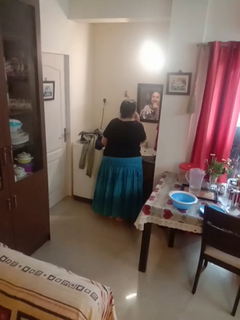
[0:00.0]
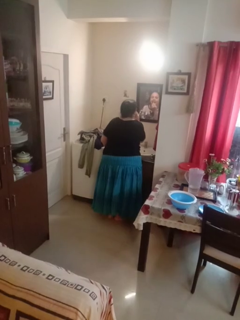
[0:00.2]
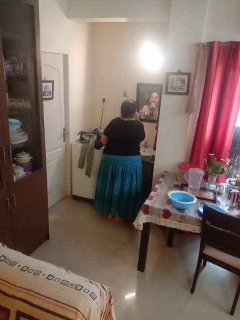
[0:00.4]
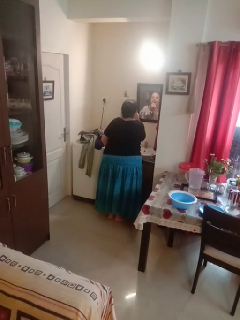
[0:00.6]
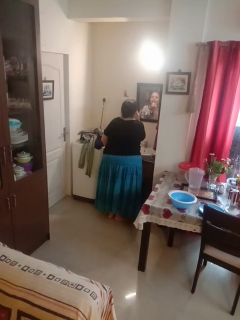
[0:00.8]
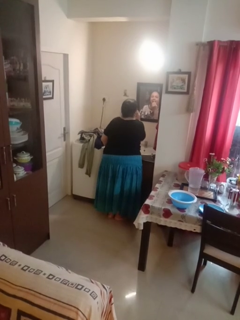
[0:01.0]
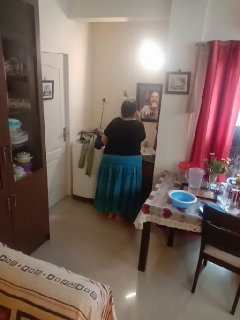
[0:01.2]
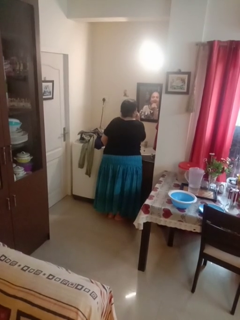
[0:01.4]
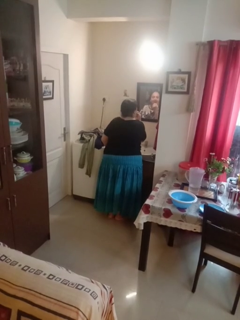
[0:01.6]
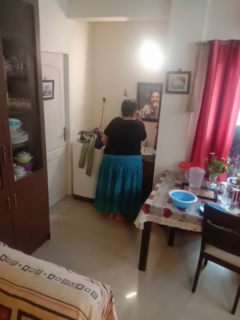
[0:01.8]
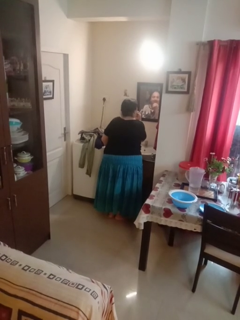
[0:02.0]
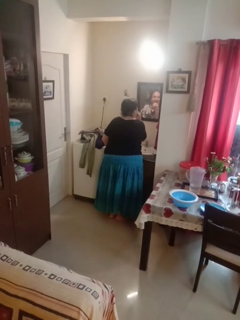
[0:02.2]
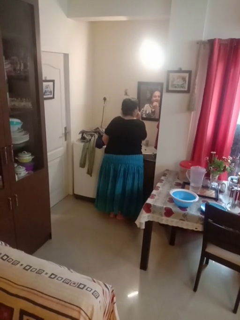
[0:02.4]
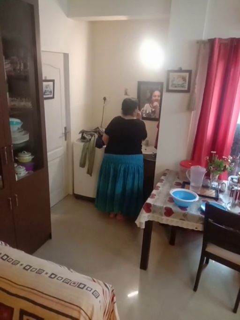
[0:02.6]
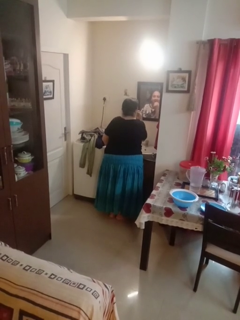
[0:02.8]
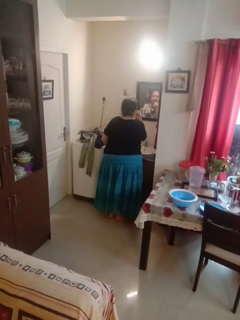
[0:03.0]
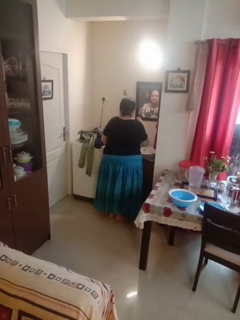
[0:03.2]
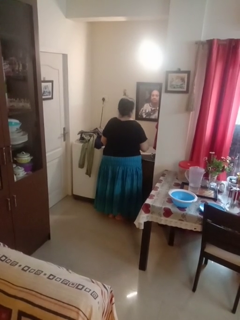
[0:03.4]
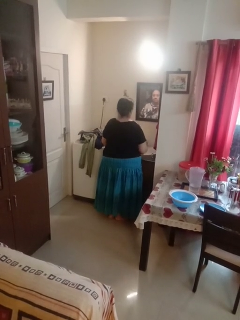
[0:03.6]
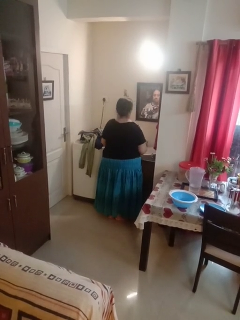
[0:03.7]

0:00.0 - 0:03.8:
person applies lip makeup

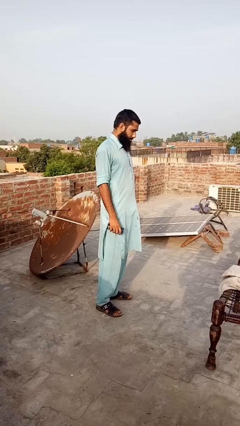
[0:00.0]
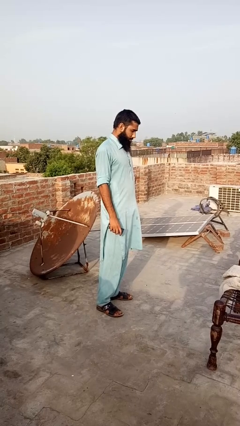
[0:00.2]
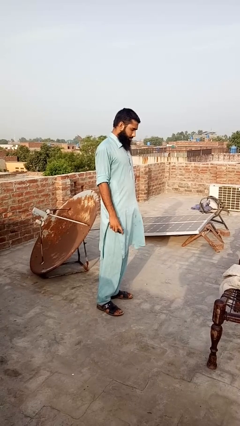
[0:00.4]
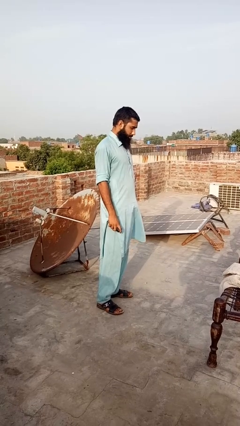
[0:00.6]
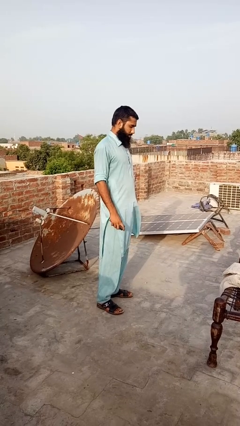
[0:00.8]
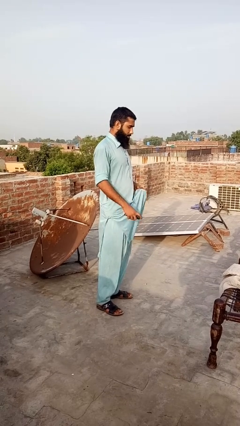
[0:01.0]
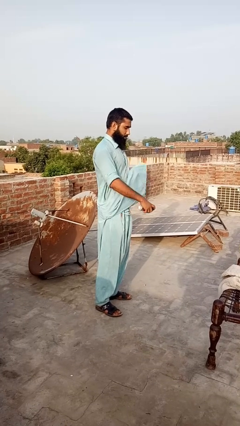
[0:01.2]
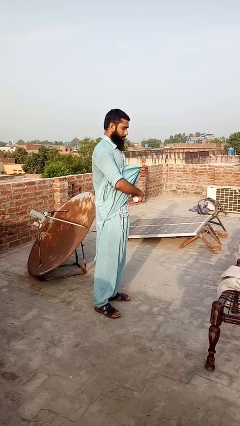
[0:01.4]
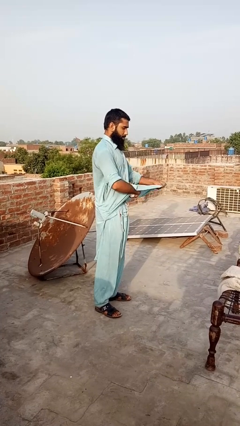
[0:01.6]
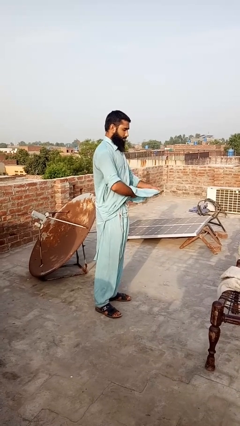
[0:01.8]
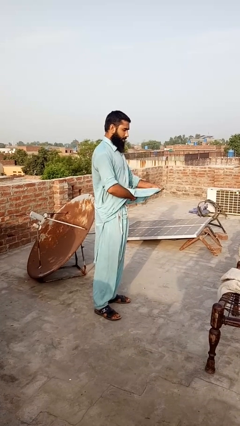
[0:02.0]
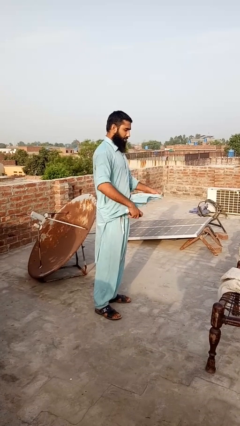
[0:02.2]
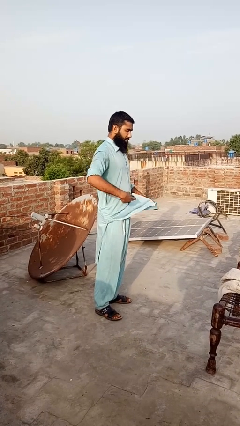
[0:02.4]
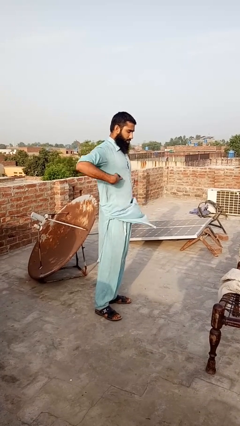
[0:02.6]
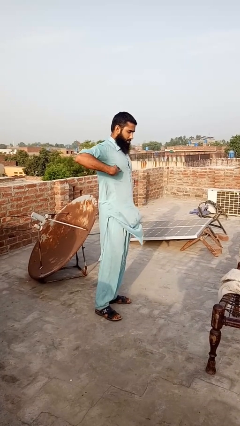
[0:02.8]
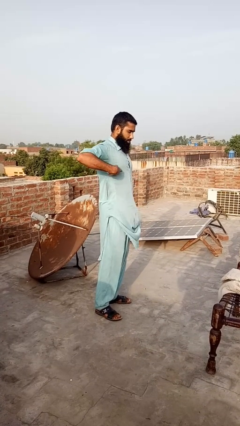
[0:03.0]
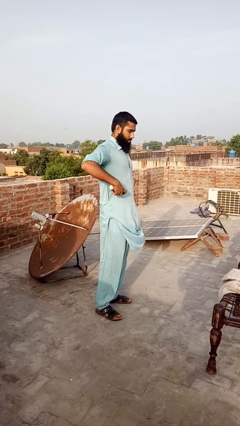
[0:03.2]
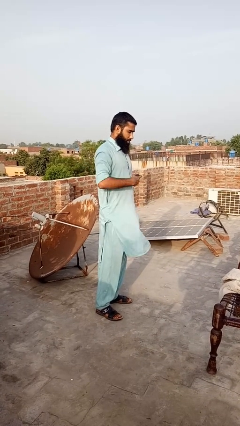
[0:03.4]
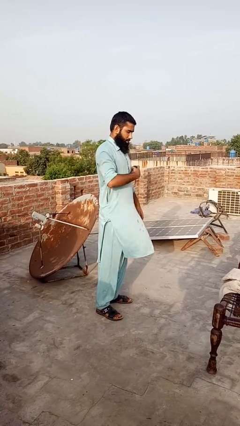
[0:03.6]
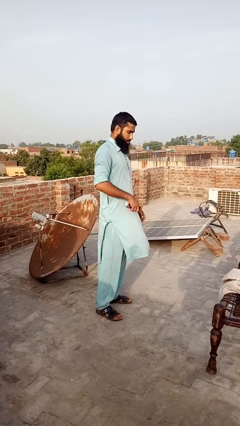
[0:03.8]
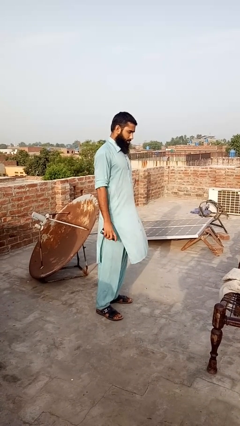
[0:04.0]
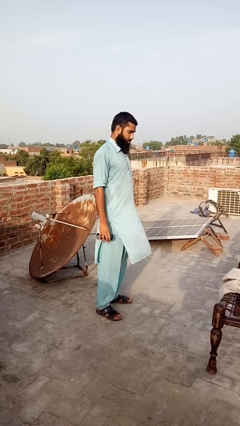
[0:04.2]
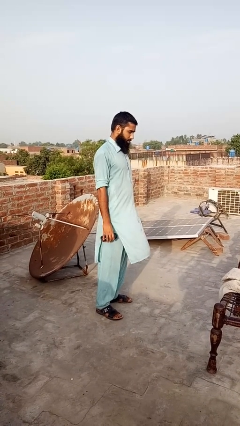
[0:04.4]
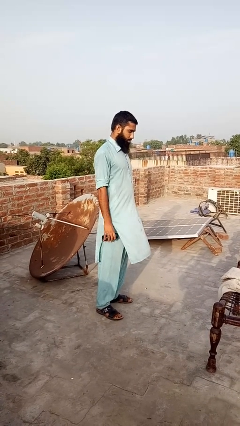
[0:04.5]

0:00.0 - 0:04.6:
person applies deodorant

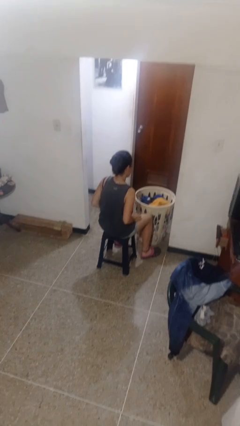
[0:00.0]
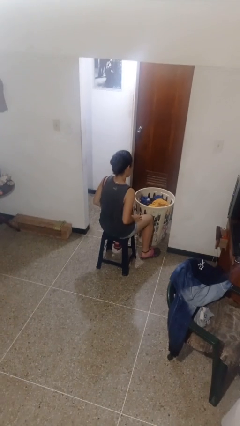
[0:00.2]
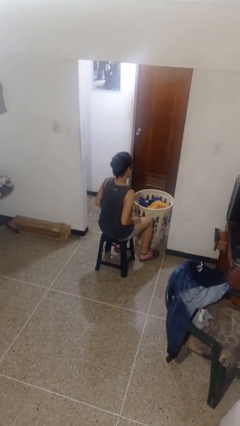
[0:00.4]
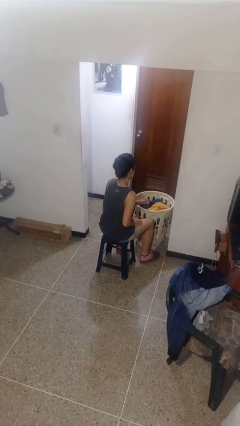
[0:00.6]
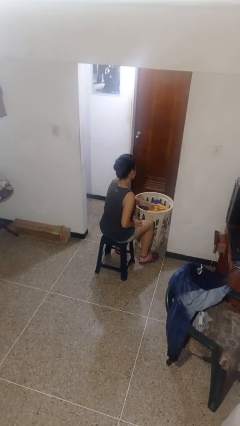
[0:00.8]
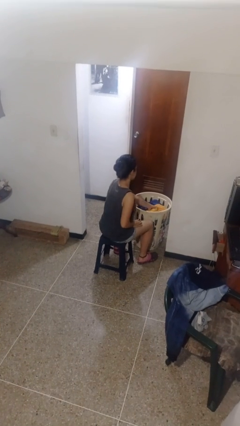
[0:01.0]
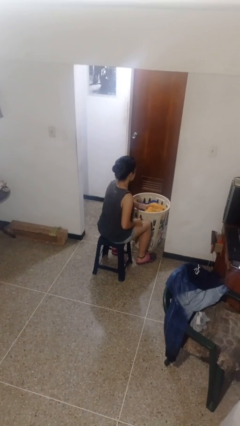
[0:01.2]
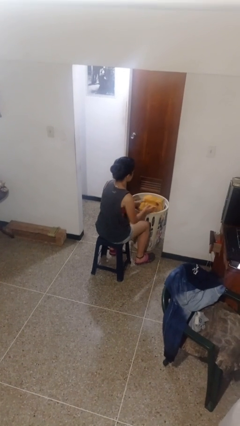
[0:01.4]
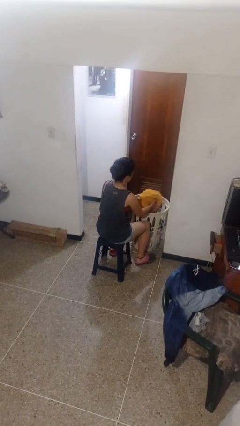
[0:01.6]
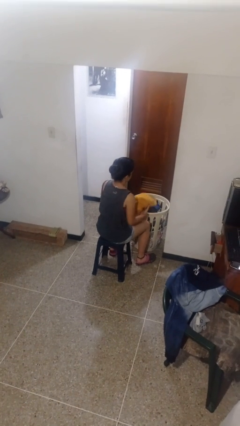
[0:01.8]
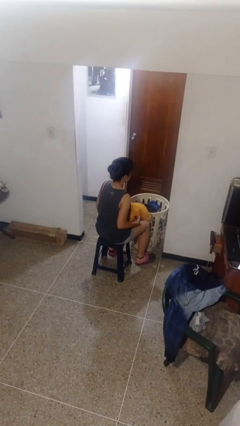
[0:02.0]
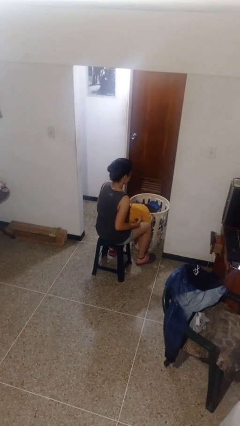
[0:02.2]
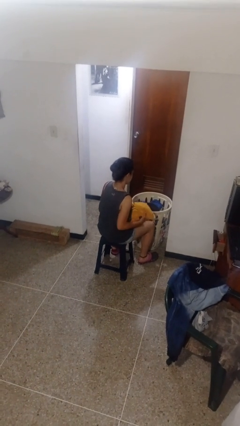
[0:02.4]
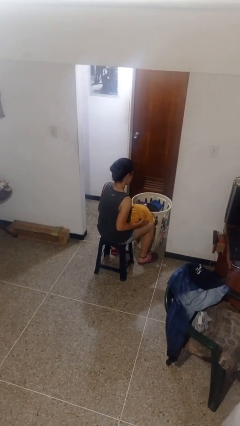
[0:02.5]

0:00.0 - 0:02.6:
person takes object from basket

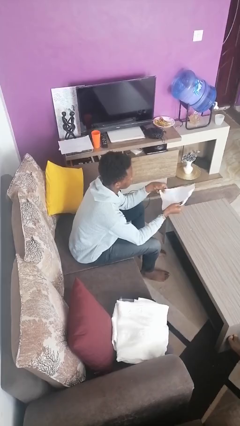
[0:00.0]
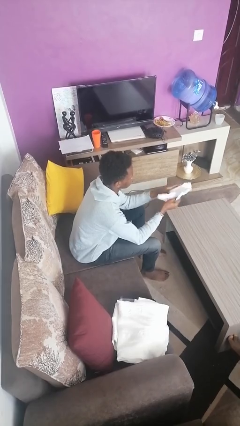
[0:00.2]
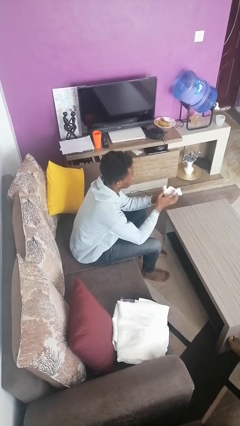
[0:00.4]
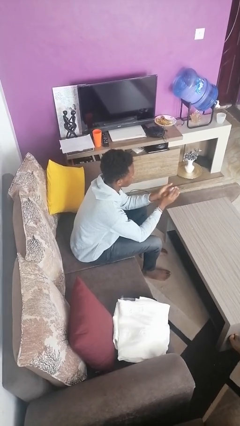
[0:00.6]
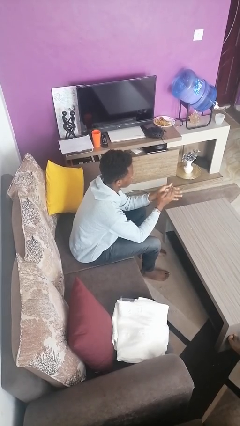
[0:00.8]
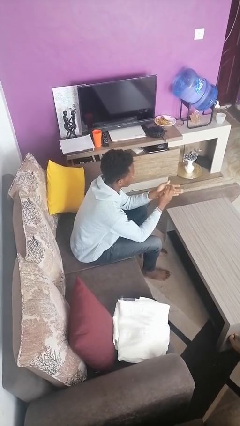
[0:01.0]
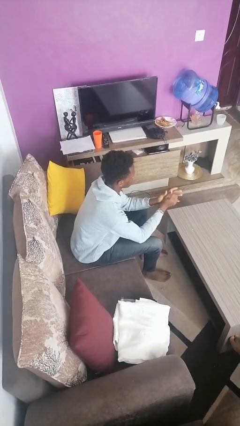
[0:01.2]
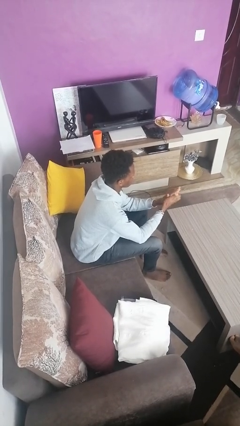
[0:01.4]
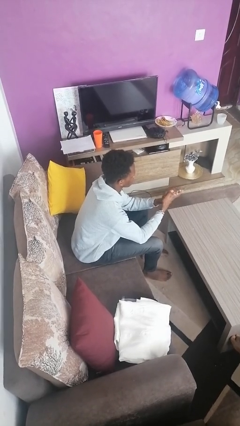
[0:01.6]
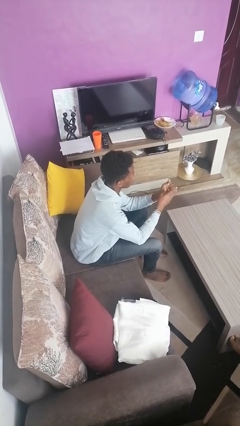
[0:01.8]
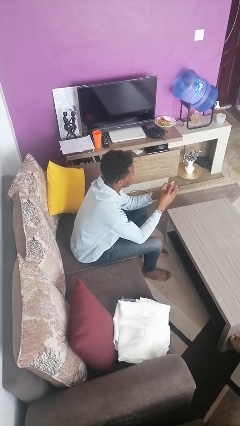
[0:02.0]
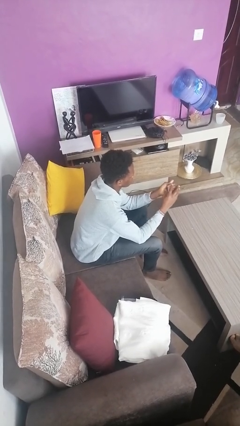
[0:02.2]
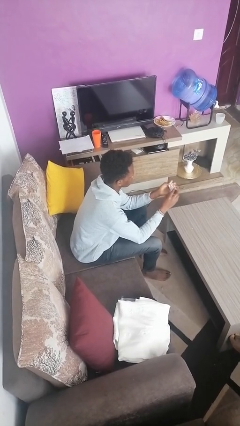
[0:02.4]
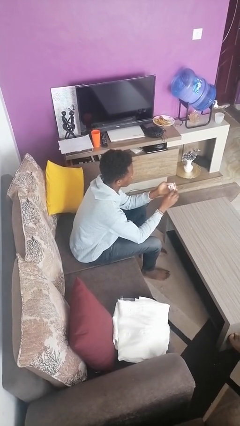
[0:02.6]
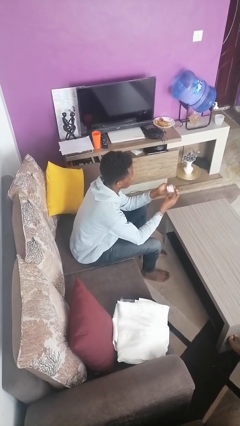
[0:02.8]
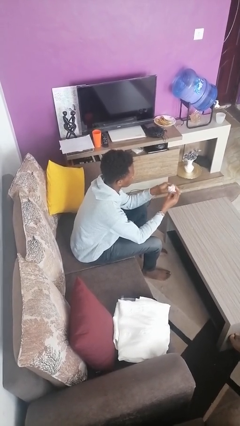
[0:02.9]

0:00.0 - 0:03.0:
person crumples paper

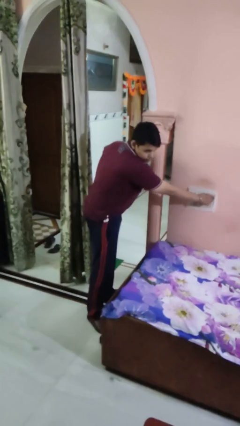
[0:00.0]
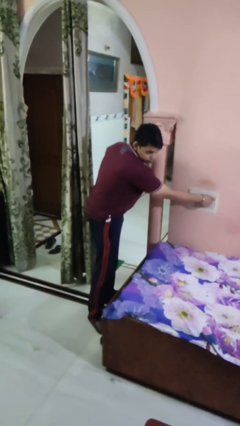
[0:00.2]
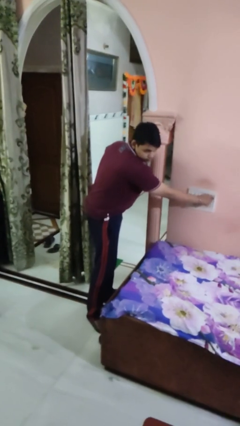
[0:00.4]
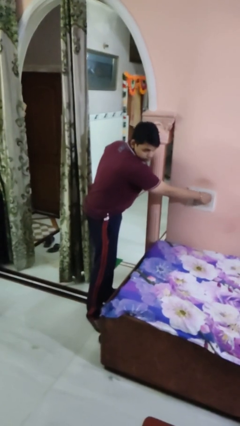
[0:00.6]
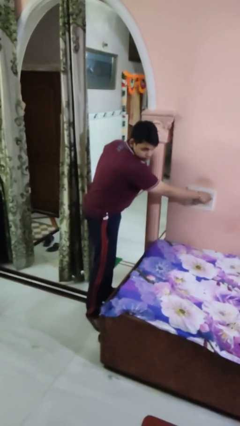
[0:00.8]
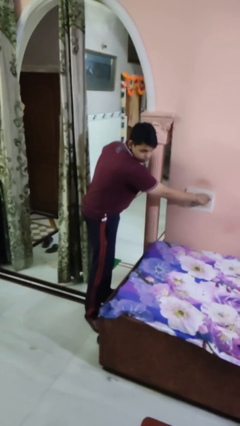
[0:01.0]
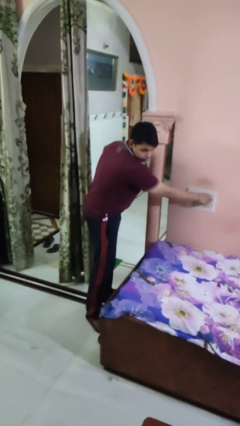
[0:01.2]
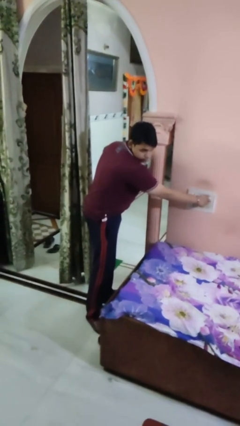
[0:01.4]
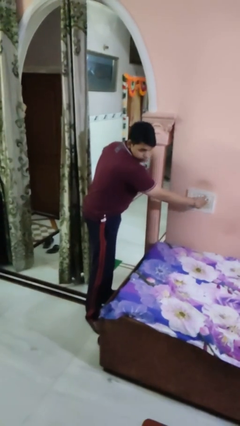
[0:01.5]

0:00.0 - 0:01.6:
person adjusts thermostat

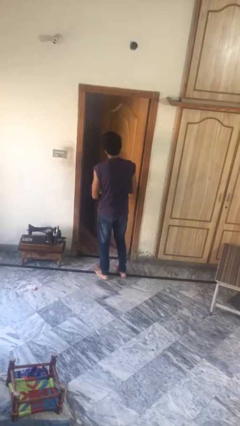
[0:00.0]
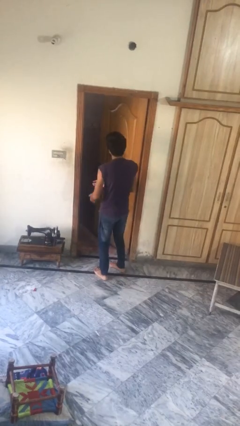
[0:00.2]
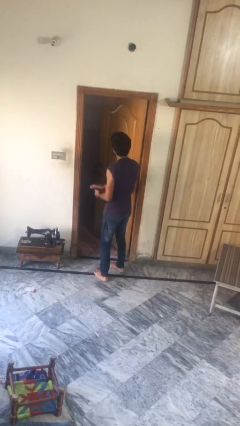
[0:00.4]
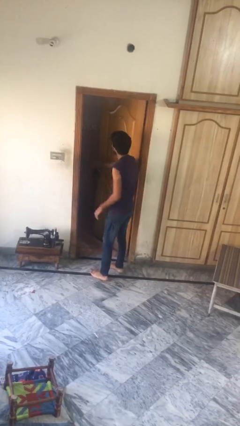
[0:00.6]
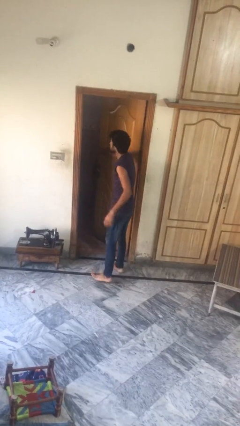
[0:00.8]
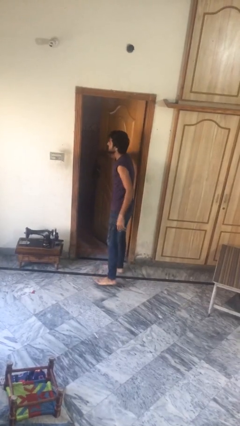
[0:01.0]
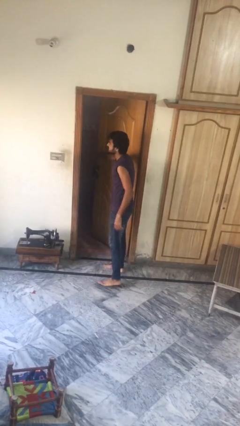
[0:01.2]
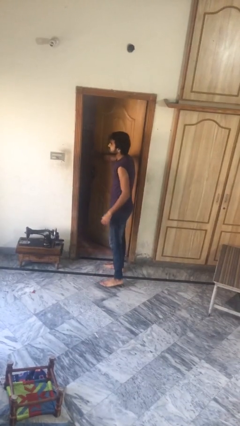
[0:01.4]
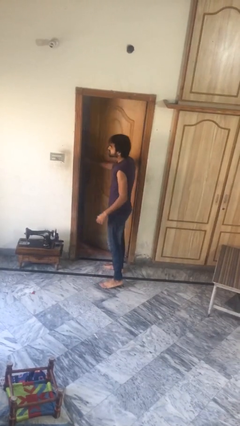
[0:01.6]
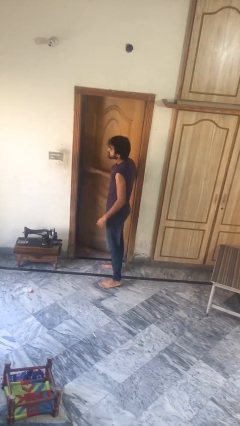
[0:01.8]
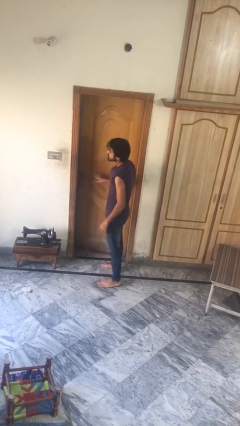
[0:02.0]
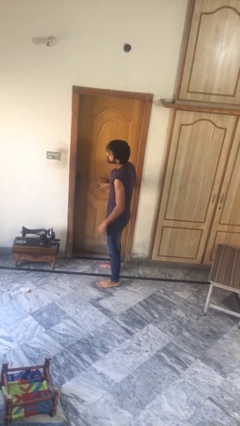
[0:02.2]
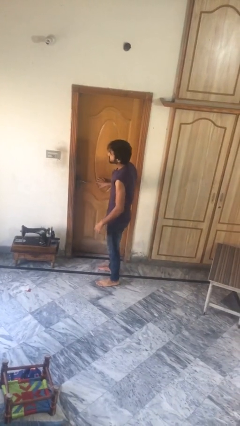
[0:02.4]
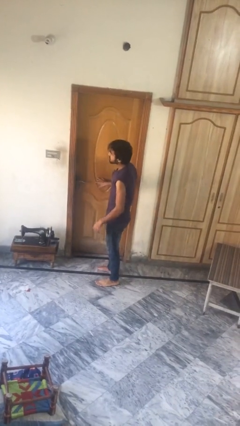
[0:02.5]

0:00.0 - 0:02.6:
person closes facility door
